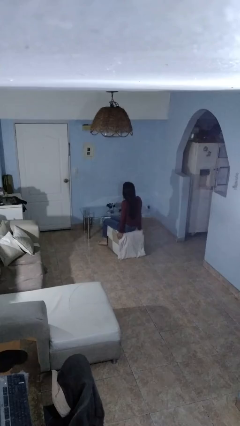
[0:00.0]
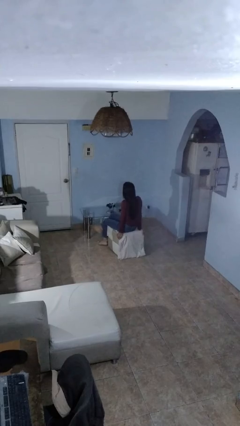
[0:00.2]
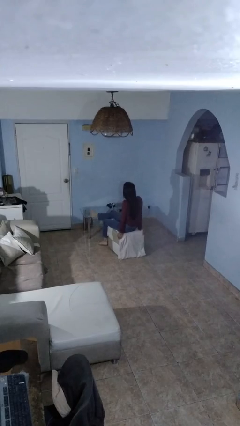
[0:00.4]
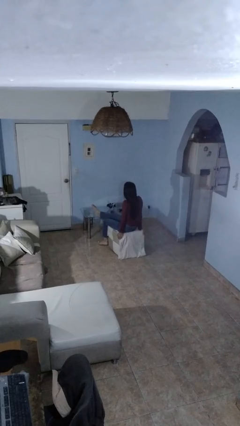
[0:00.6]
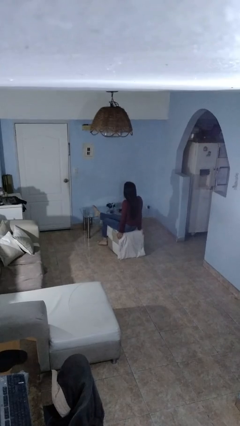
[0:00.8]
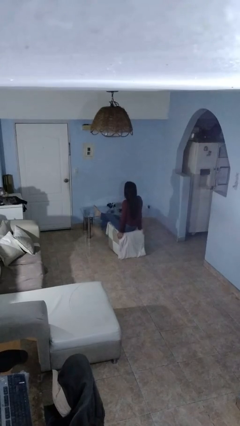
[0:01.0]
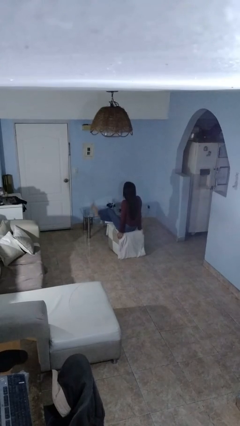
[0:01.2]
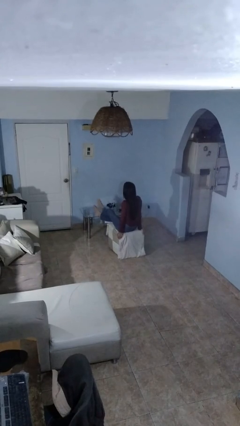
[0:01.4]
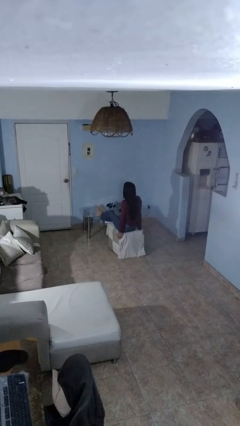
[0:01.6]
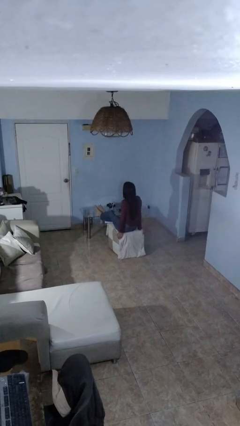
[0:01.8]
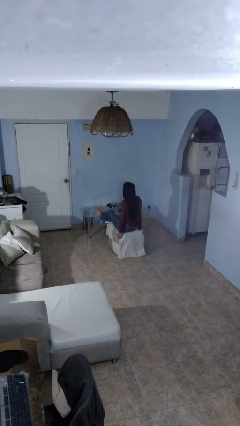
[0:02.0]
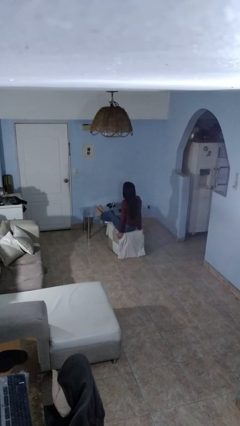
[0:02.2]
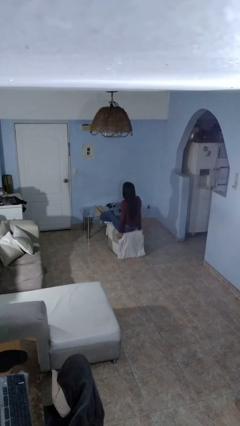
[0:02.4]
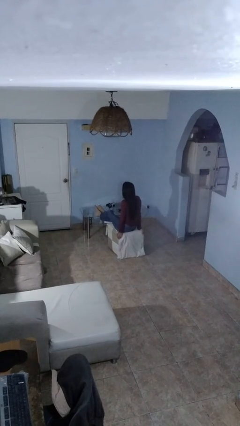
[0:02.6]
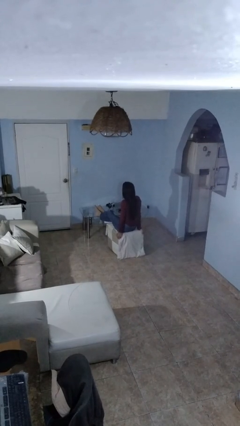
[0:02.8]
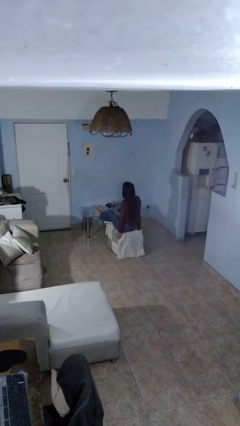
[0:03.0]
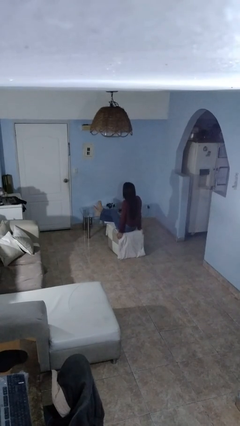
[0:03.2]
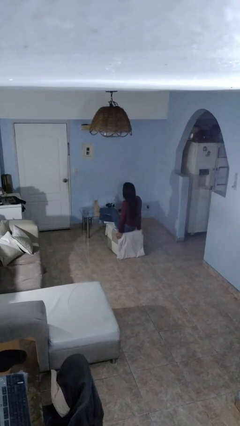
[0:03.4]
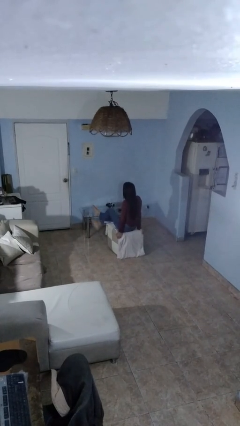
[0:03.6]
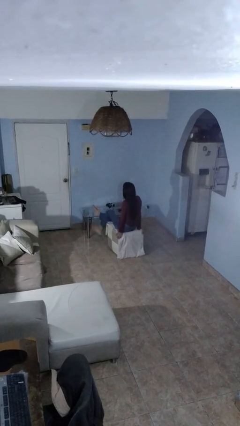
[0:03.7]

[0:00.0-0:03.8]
person puts feet up

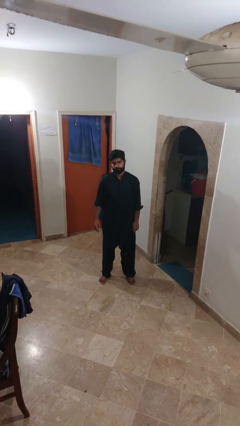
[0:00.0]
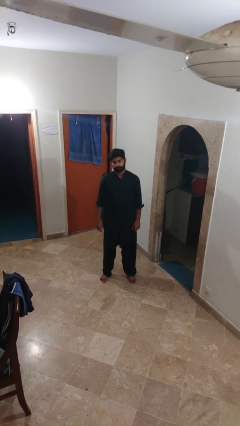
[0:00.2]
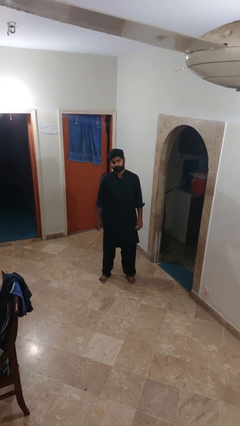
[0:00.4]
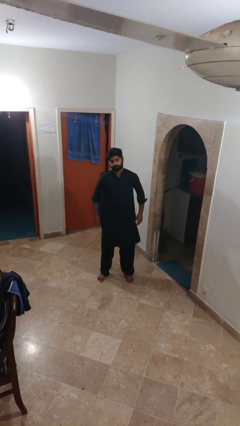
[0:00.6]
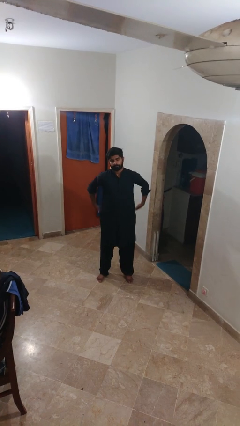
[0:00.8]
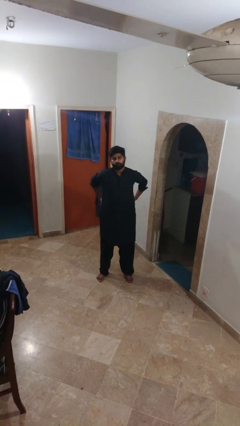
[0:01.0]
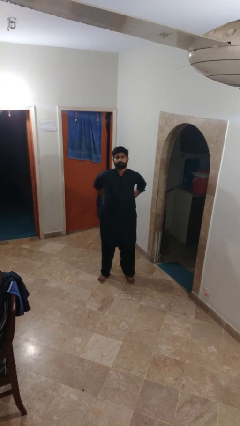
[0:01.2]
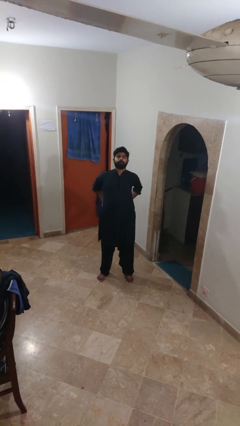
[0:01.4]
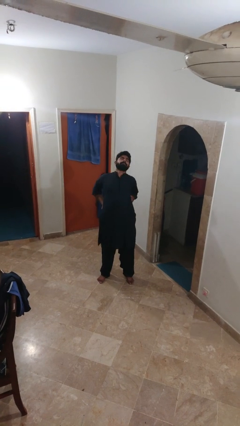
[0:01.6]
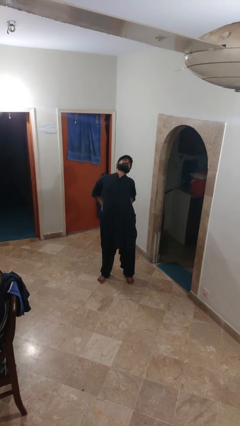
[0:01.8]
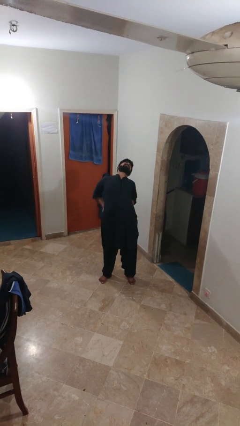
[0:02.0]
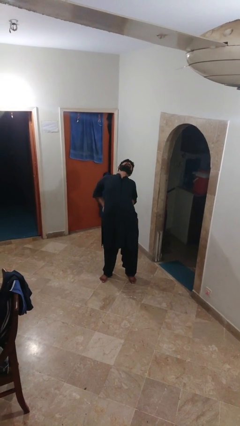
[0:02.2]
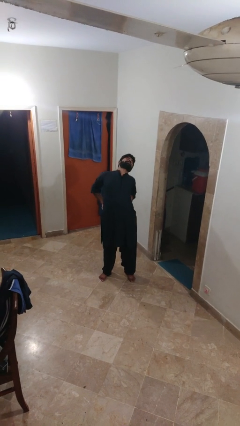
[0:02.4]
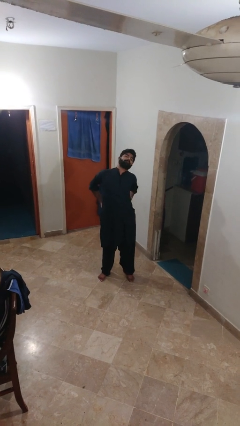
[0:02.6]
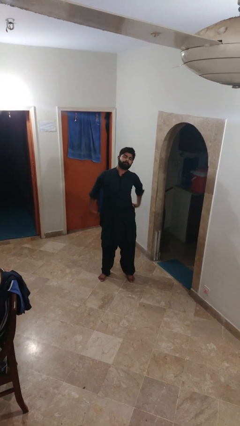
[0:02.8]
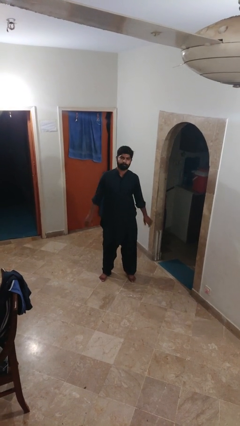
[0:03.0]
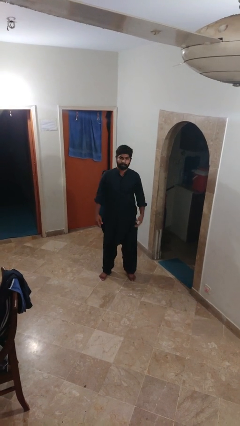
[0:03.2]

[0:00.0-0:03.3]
person stretches back

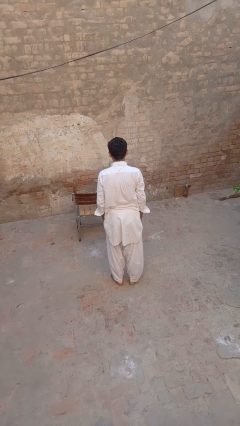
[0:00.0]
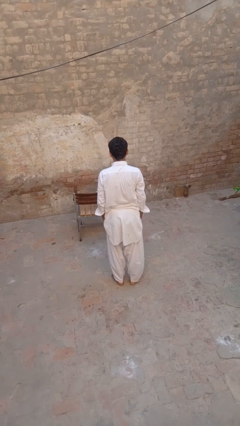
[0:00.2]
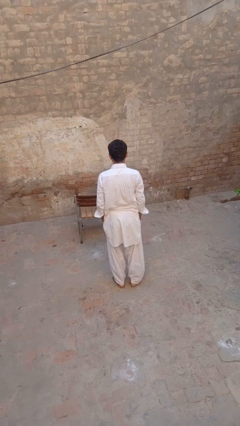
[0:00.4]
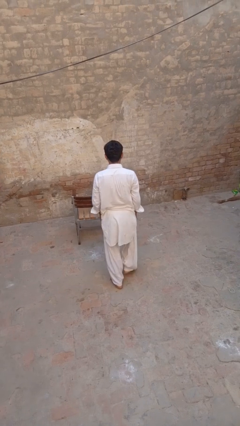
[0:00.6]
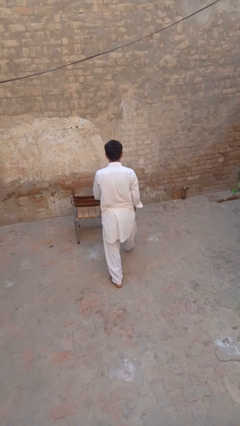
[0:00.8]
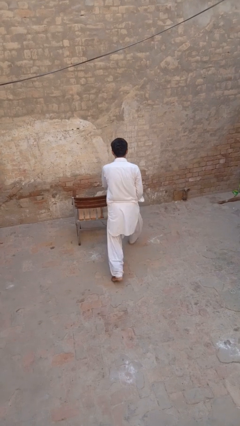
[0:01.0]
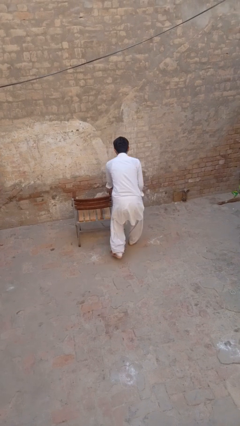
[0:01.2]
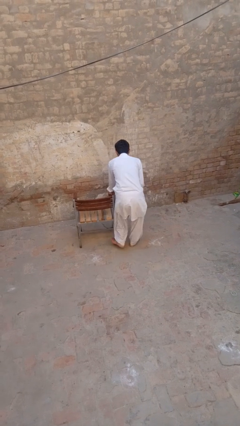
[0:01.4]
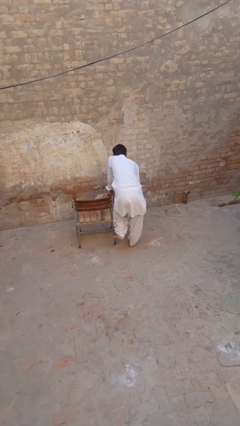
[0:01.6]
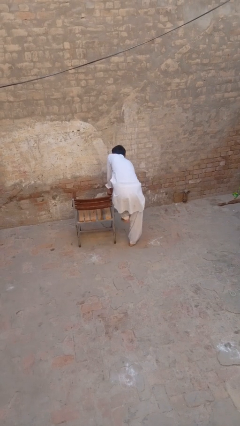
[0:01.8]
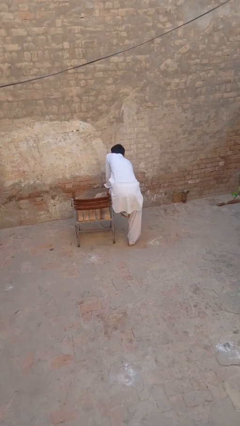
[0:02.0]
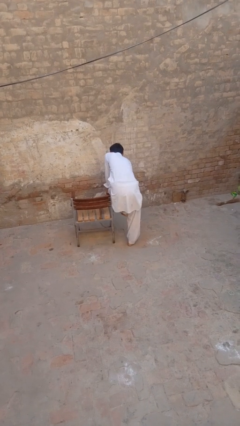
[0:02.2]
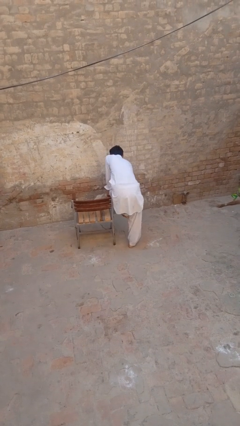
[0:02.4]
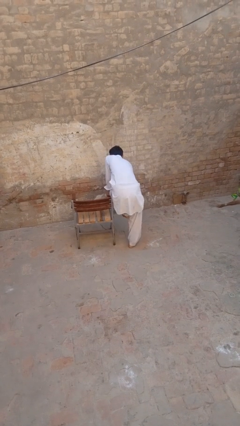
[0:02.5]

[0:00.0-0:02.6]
person stubs toe

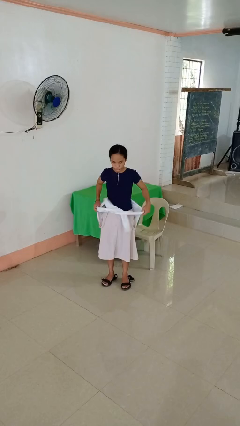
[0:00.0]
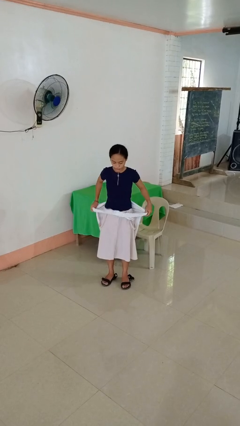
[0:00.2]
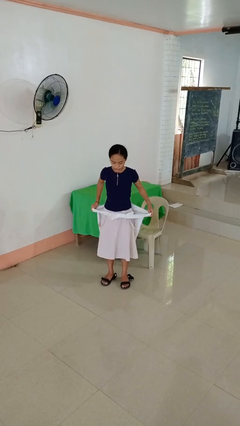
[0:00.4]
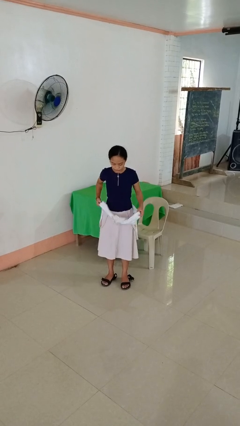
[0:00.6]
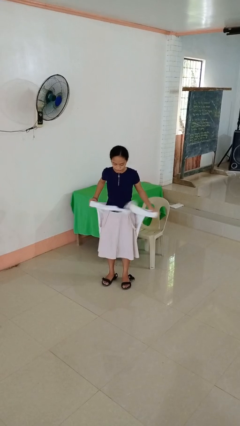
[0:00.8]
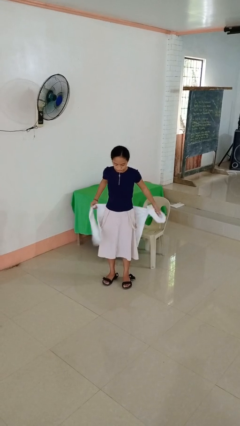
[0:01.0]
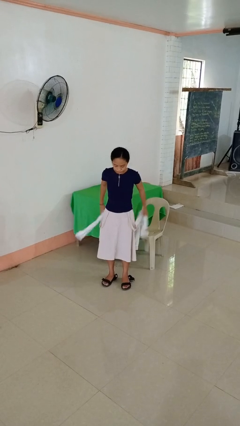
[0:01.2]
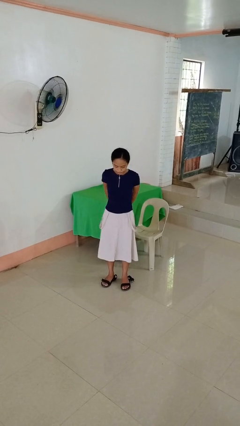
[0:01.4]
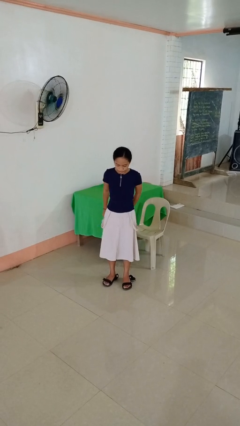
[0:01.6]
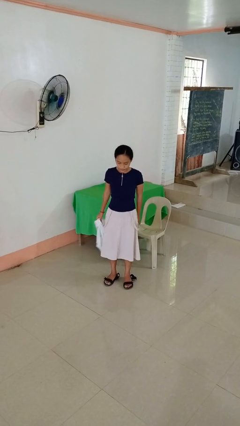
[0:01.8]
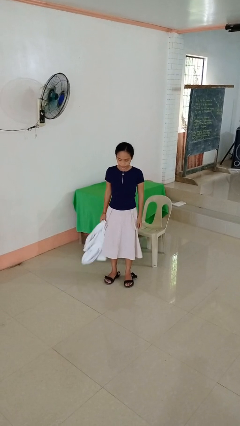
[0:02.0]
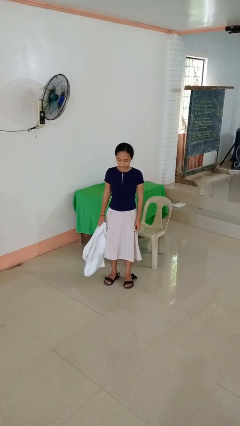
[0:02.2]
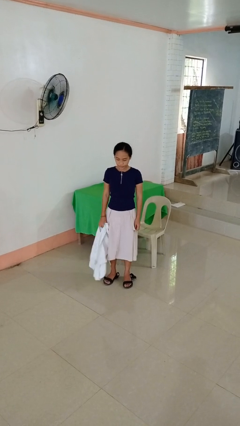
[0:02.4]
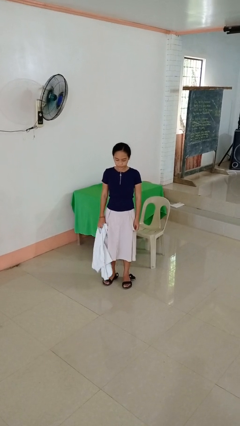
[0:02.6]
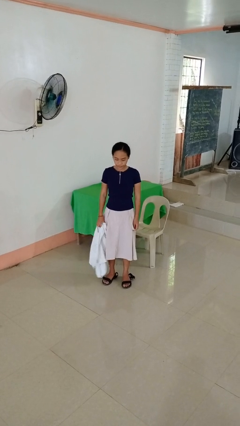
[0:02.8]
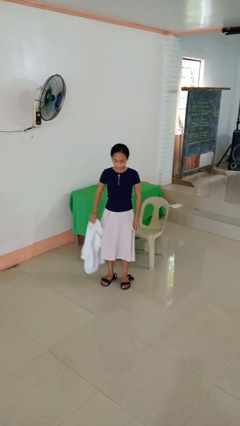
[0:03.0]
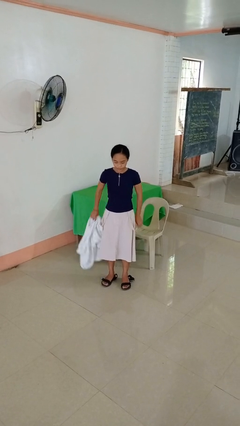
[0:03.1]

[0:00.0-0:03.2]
person unties jacket around waist

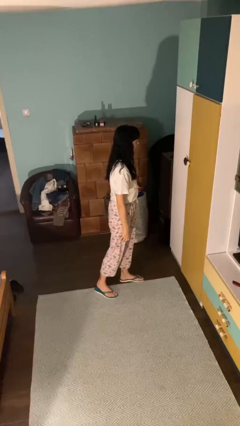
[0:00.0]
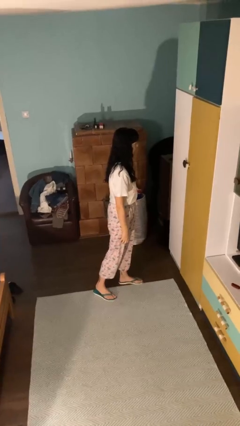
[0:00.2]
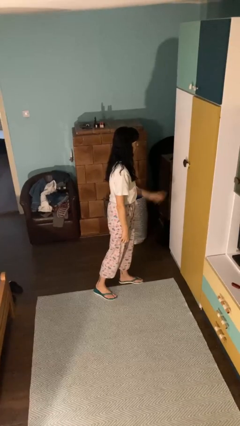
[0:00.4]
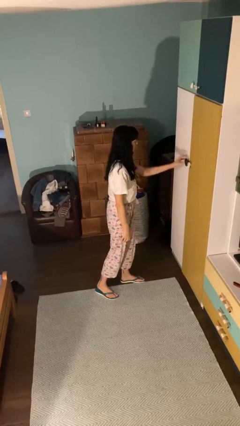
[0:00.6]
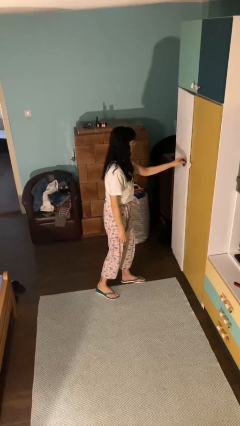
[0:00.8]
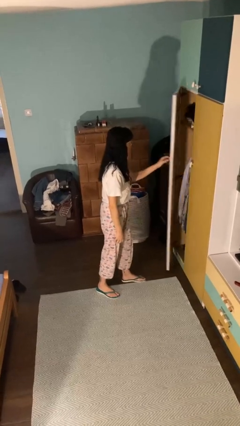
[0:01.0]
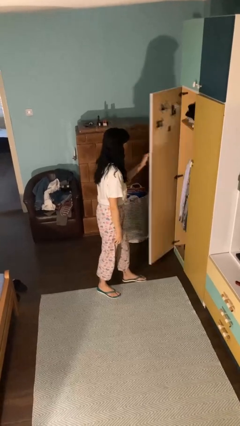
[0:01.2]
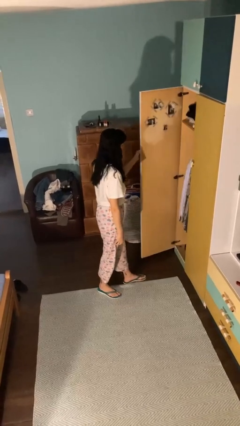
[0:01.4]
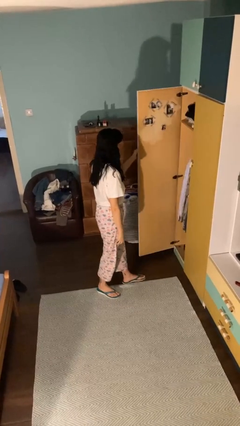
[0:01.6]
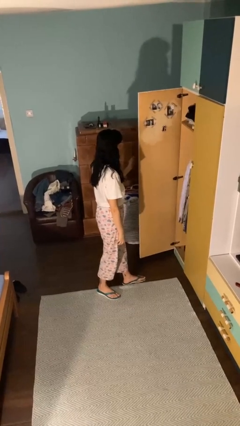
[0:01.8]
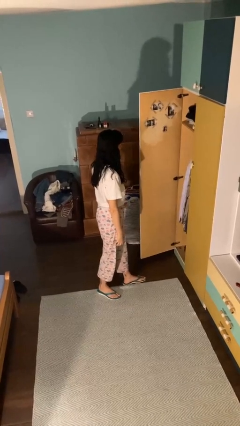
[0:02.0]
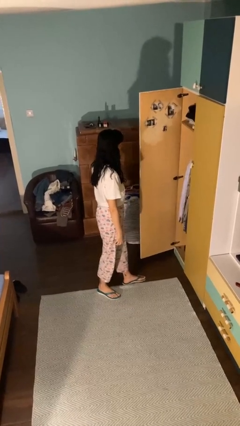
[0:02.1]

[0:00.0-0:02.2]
person opens closet door

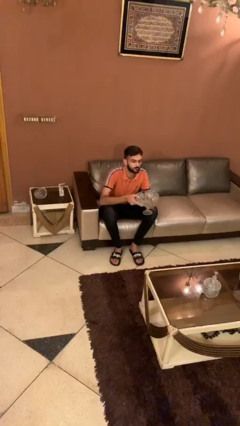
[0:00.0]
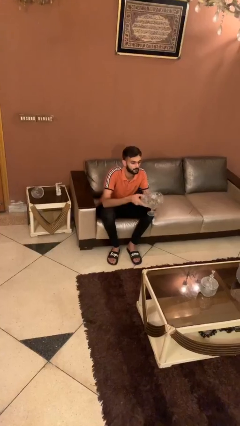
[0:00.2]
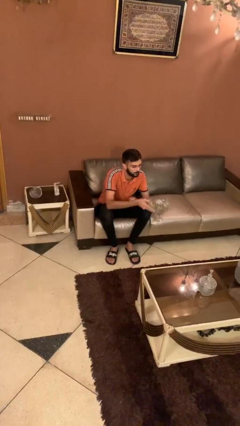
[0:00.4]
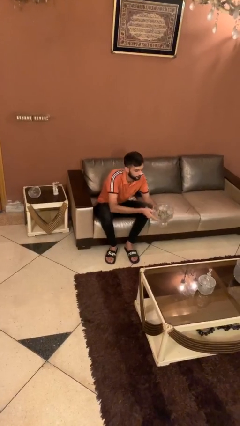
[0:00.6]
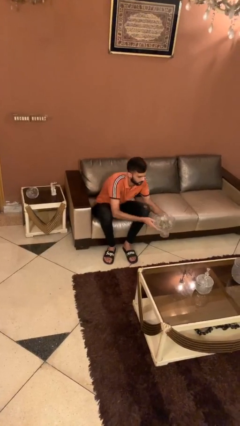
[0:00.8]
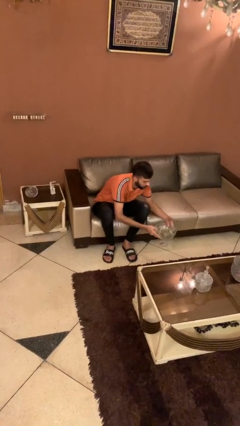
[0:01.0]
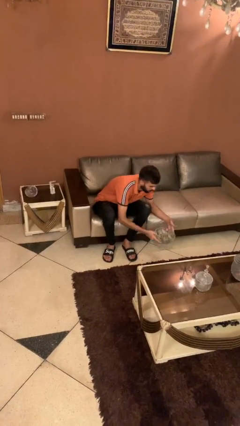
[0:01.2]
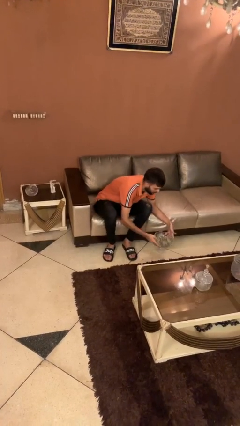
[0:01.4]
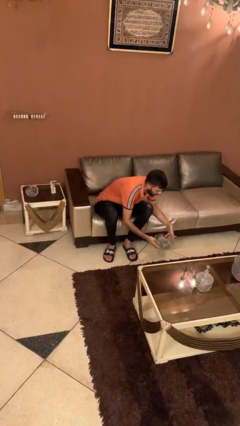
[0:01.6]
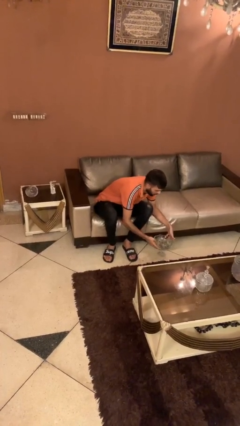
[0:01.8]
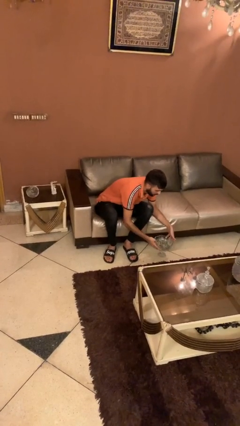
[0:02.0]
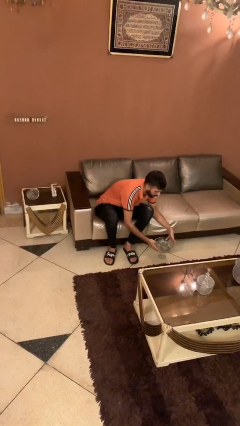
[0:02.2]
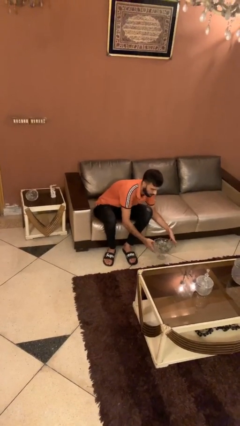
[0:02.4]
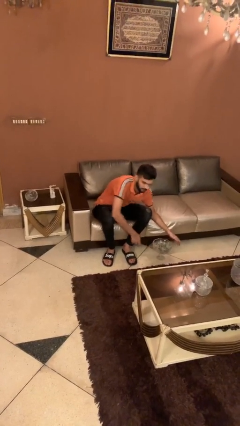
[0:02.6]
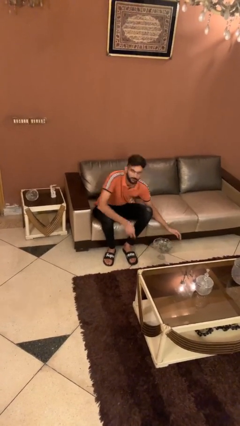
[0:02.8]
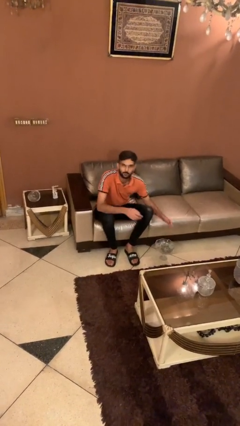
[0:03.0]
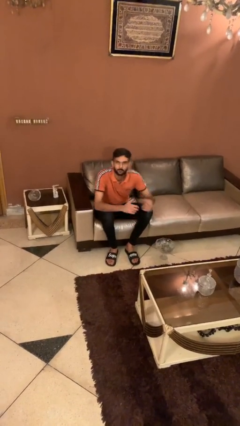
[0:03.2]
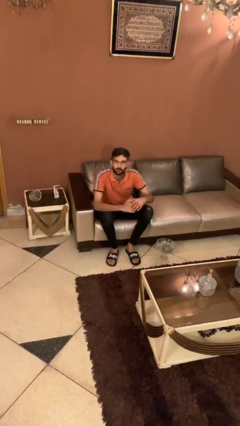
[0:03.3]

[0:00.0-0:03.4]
person puts down object on floor
